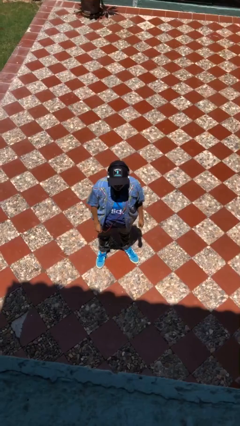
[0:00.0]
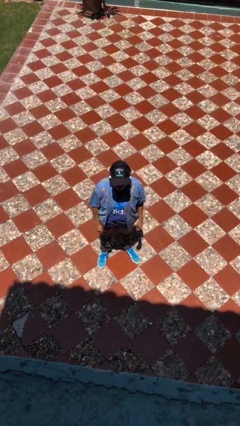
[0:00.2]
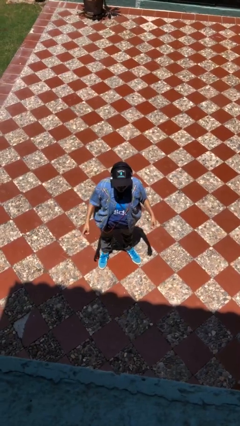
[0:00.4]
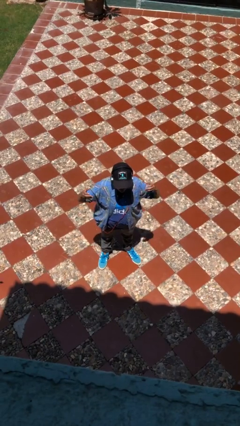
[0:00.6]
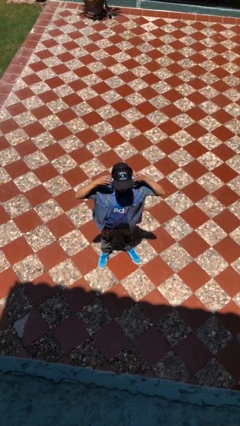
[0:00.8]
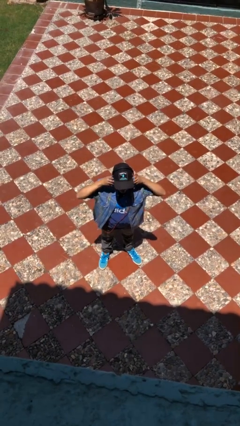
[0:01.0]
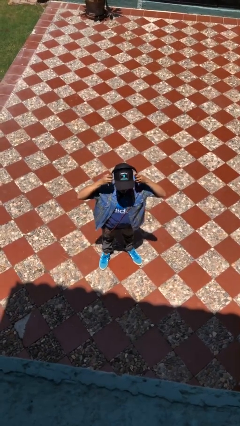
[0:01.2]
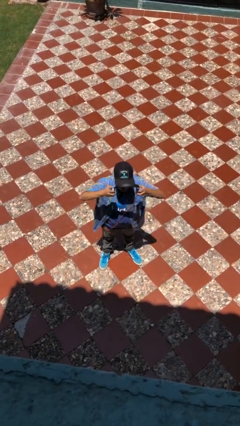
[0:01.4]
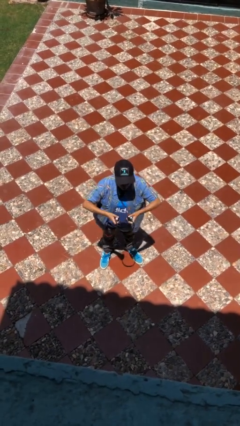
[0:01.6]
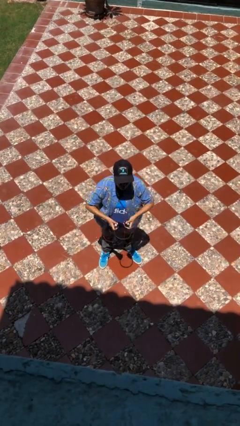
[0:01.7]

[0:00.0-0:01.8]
person takes off headphones

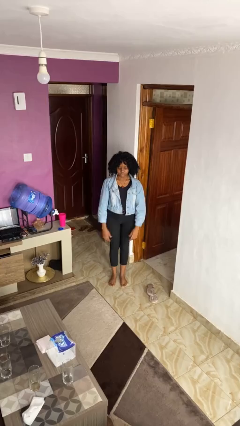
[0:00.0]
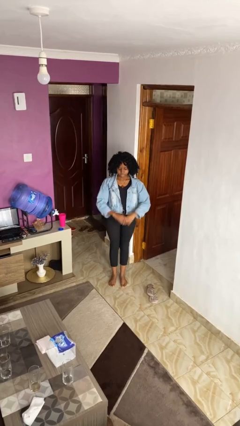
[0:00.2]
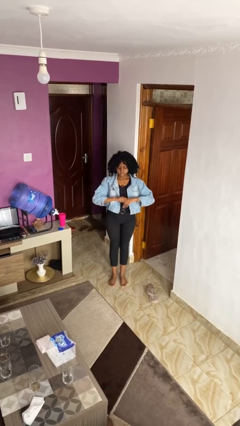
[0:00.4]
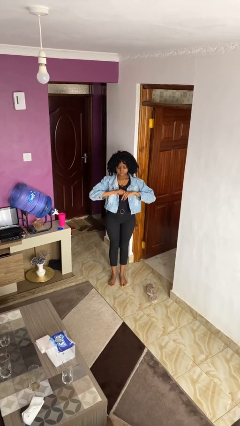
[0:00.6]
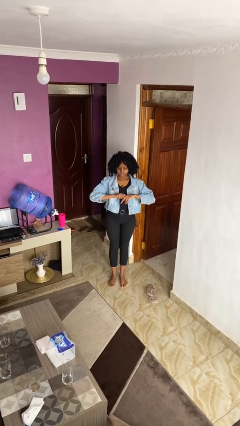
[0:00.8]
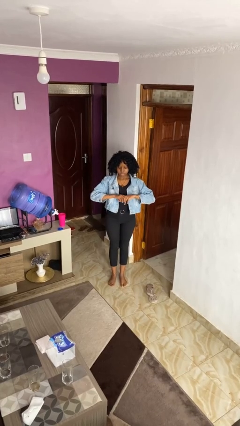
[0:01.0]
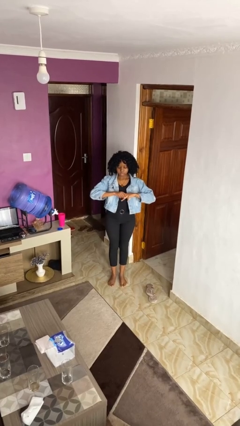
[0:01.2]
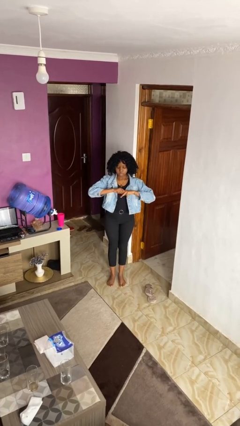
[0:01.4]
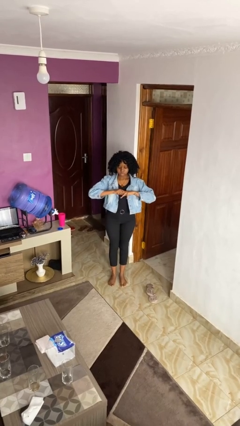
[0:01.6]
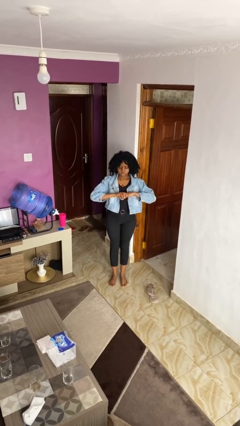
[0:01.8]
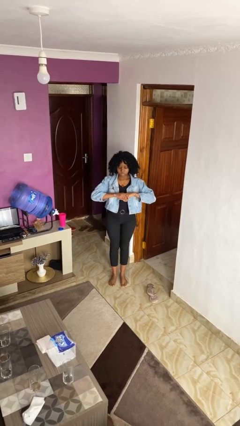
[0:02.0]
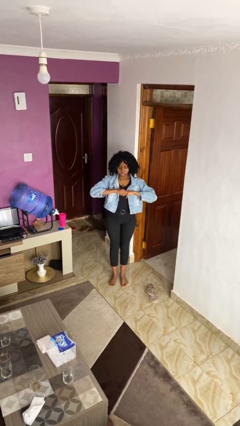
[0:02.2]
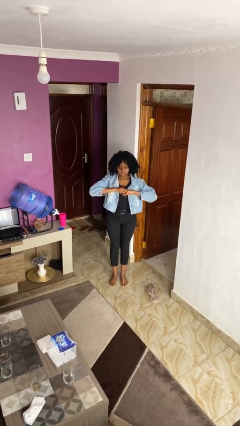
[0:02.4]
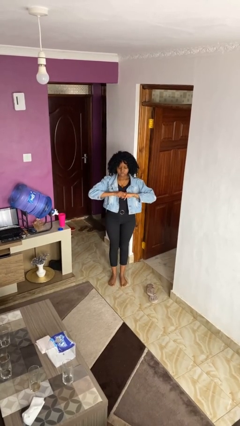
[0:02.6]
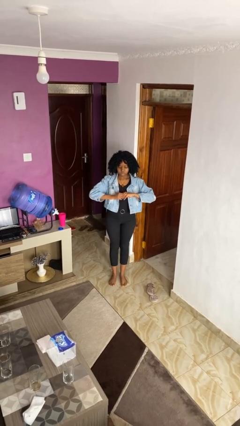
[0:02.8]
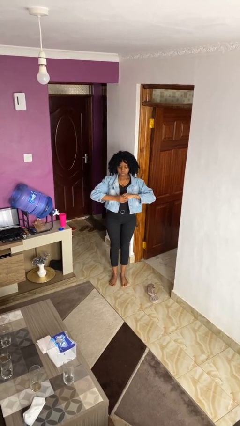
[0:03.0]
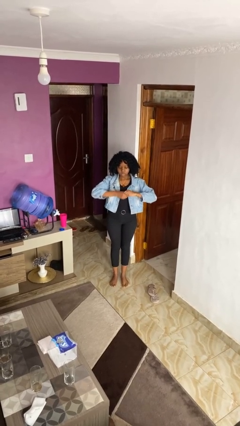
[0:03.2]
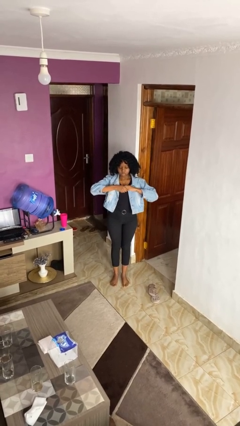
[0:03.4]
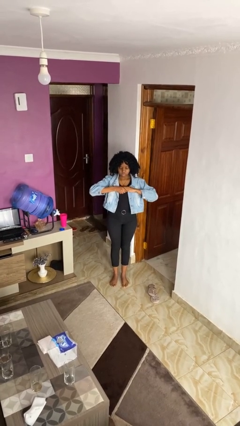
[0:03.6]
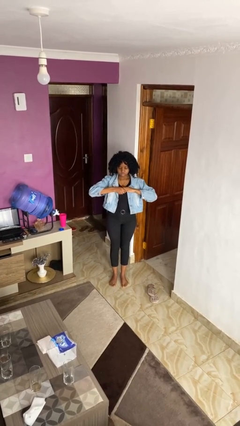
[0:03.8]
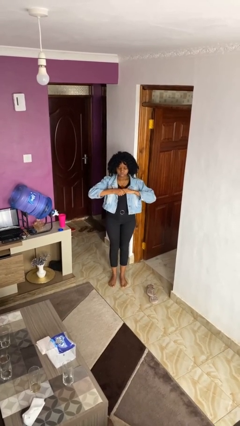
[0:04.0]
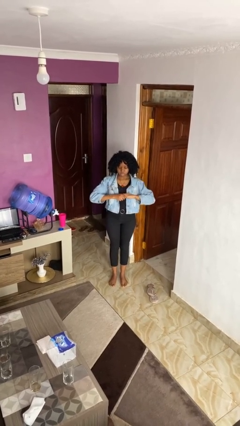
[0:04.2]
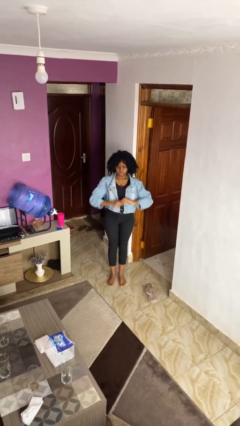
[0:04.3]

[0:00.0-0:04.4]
person cracks knuckles

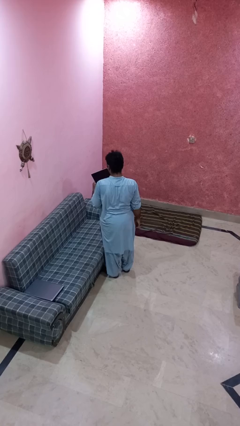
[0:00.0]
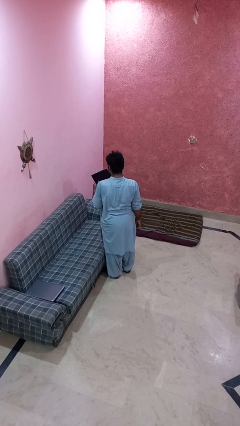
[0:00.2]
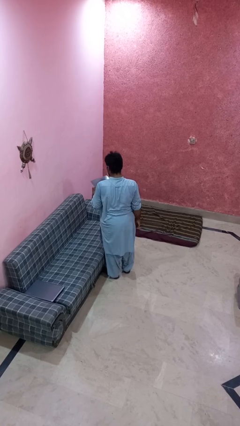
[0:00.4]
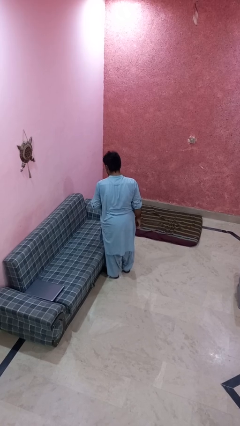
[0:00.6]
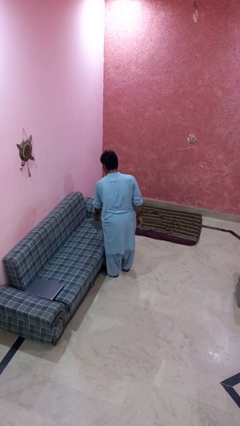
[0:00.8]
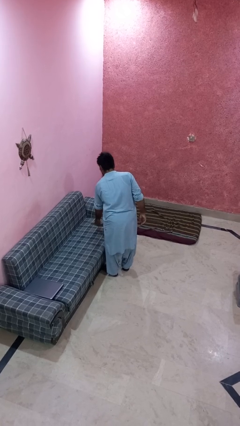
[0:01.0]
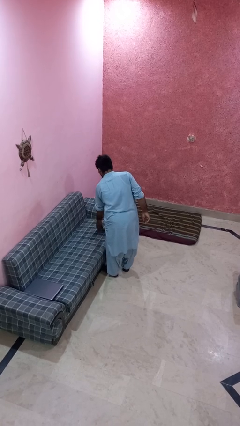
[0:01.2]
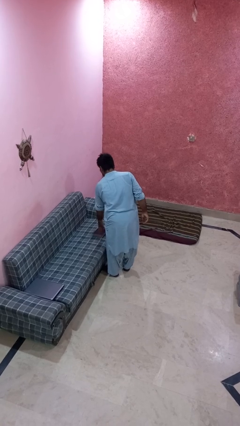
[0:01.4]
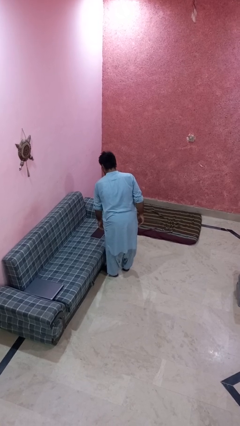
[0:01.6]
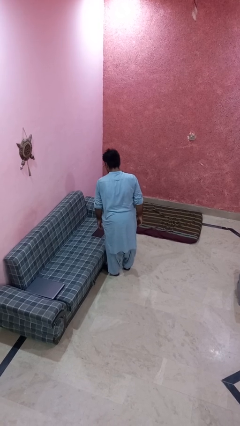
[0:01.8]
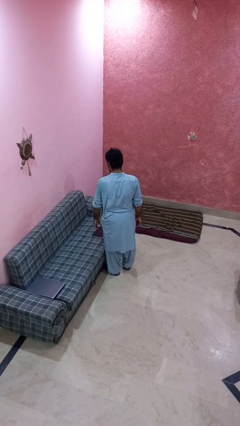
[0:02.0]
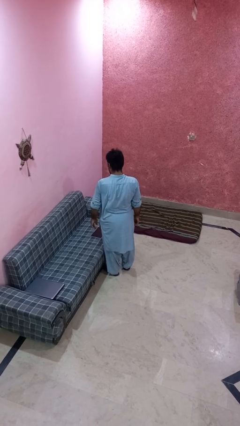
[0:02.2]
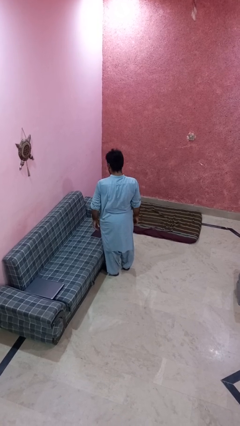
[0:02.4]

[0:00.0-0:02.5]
person puts down object on couch

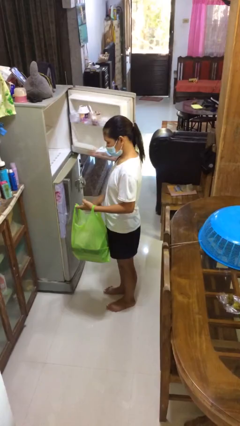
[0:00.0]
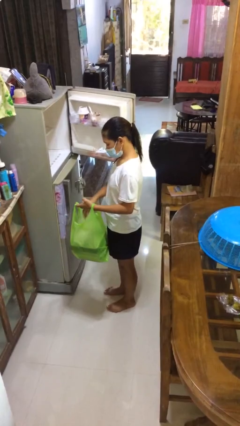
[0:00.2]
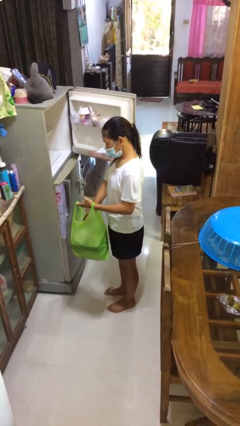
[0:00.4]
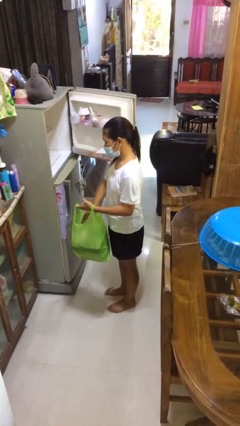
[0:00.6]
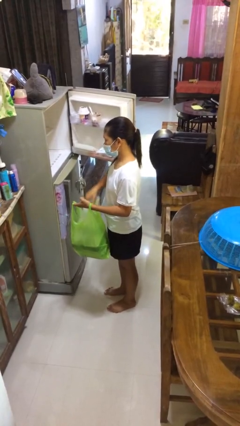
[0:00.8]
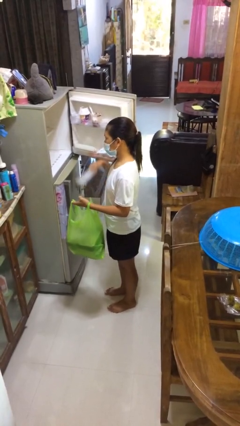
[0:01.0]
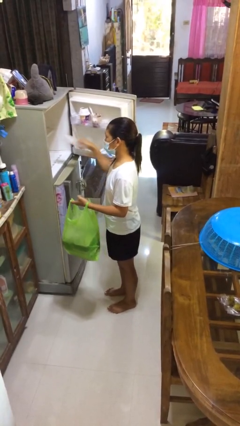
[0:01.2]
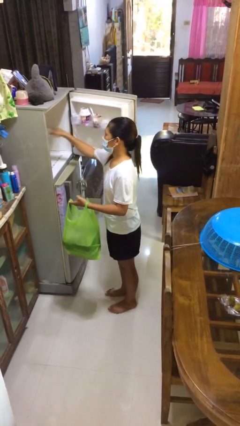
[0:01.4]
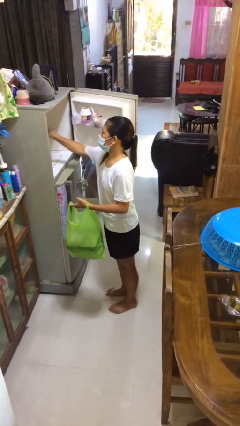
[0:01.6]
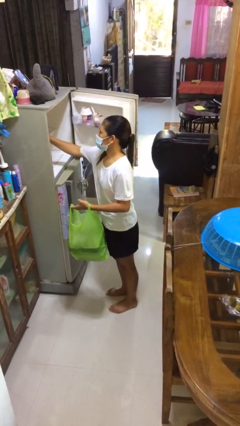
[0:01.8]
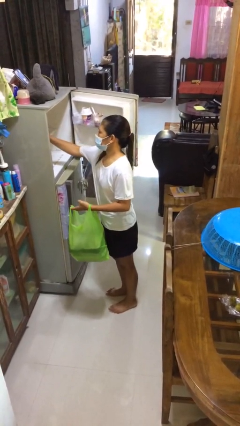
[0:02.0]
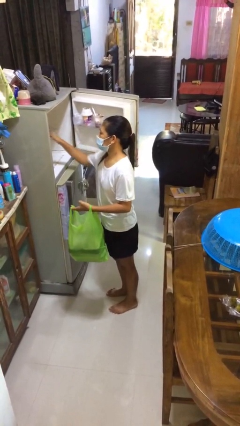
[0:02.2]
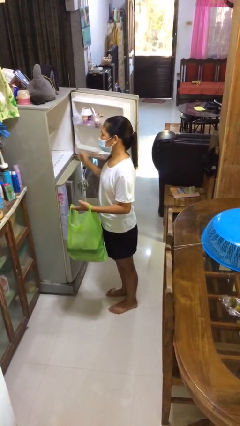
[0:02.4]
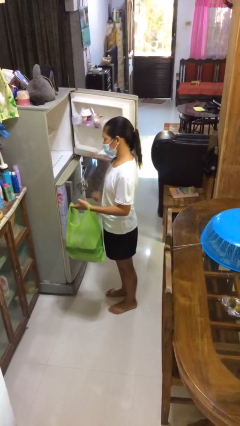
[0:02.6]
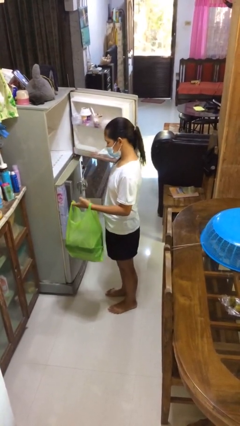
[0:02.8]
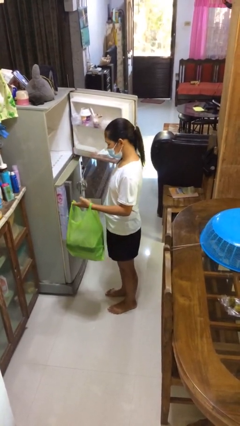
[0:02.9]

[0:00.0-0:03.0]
person loads groceries into refrigerator

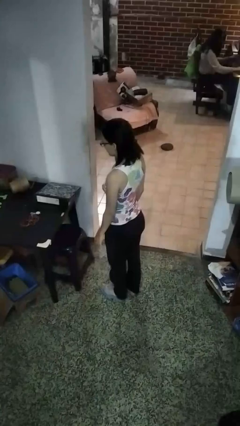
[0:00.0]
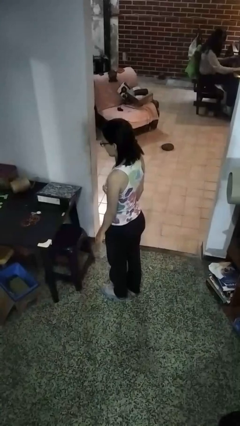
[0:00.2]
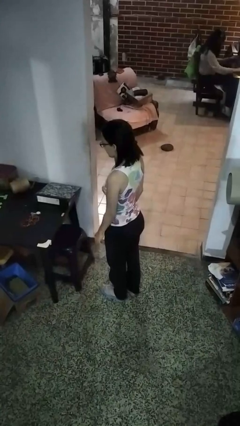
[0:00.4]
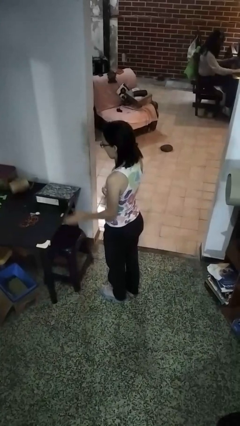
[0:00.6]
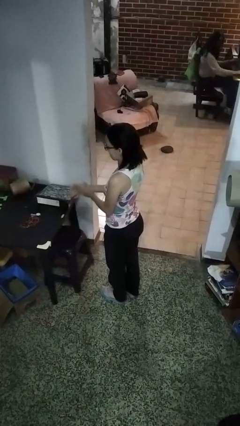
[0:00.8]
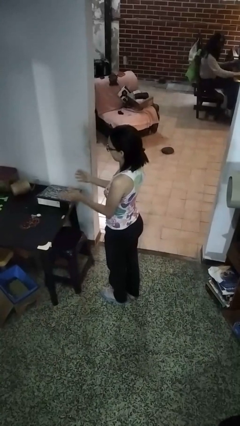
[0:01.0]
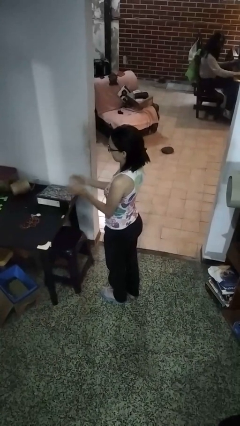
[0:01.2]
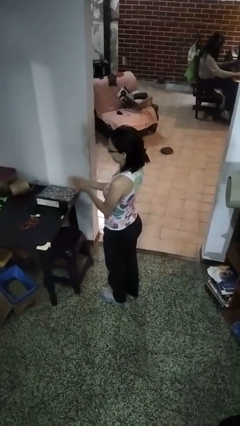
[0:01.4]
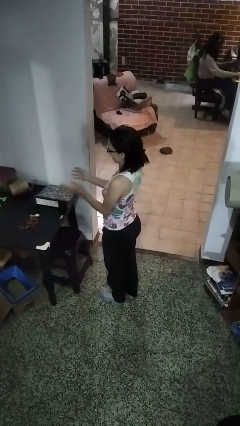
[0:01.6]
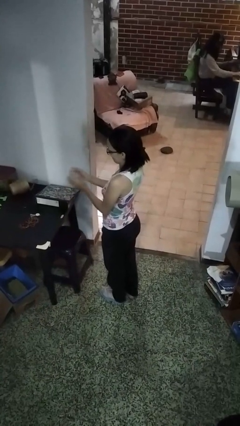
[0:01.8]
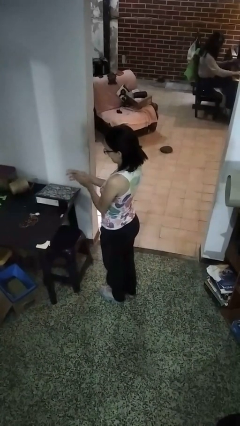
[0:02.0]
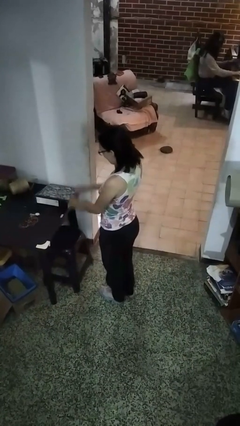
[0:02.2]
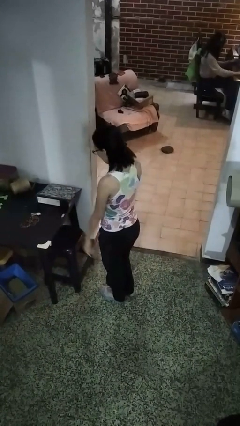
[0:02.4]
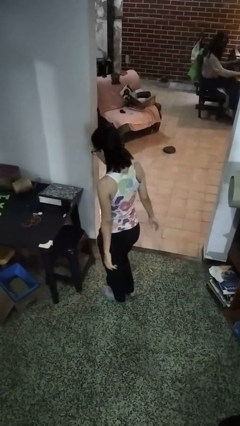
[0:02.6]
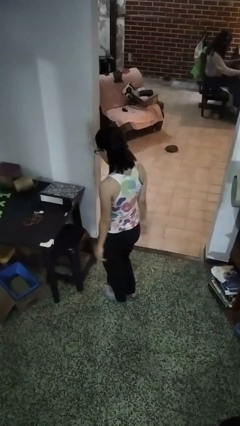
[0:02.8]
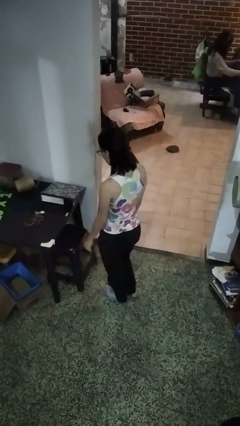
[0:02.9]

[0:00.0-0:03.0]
person claps hands

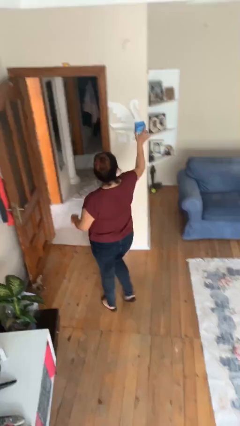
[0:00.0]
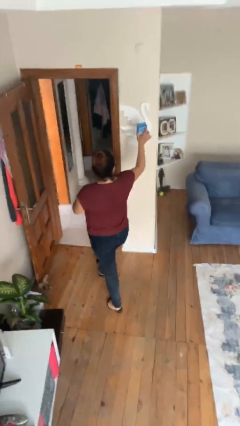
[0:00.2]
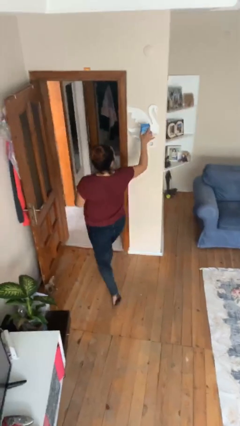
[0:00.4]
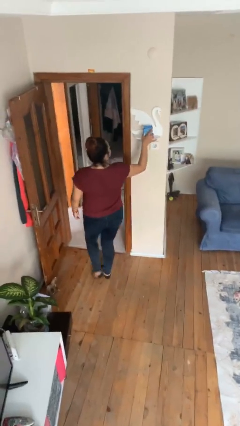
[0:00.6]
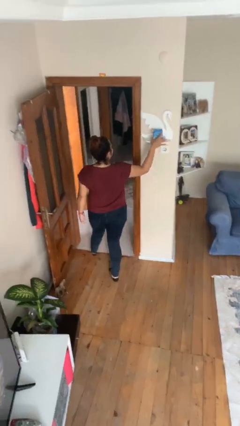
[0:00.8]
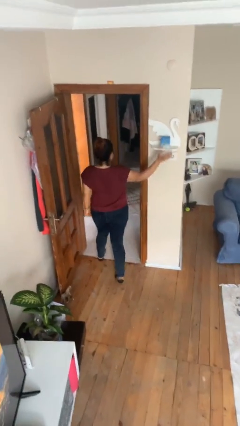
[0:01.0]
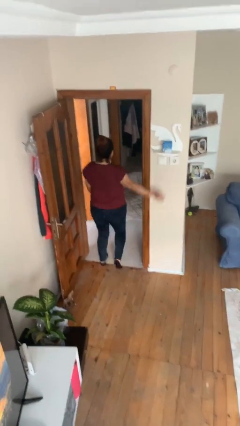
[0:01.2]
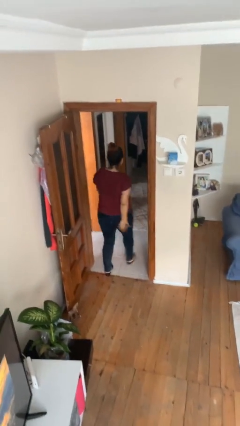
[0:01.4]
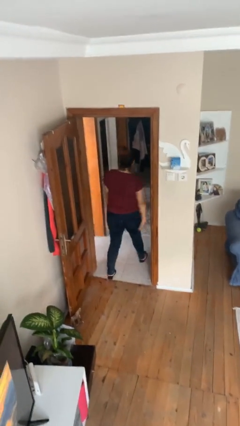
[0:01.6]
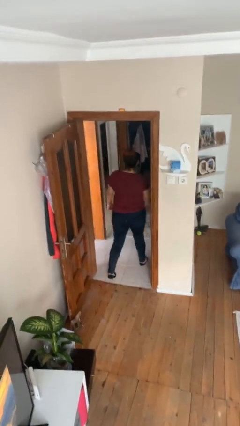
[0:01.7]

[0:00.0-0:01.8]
person puts down object on shelf

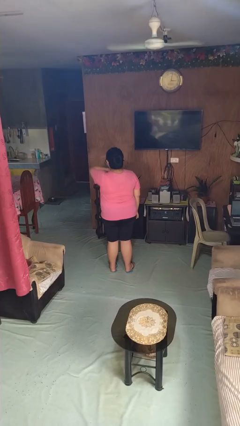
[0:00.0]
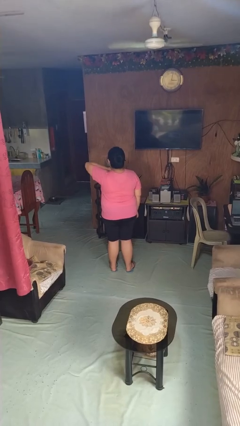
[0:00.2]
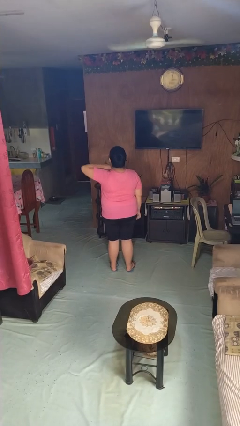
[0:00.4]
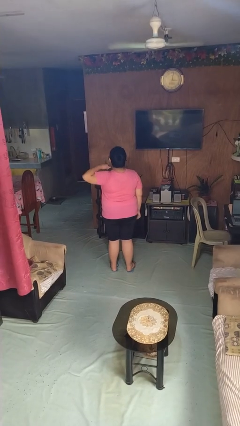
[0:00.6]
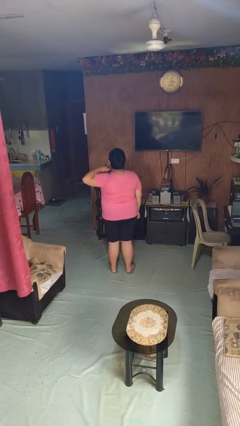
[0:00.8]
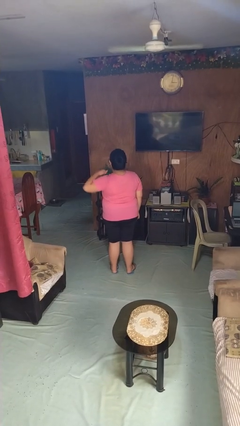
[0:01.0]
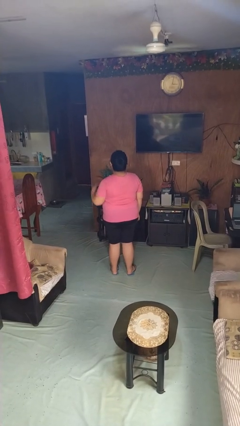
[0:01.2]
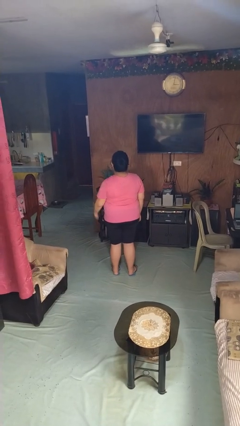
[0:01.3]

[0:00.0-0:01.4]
person gestures cut
